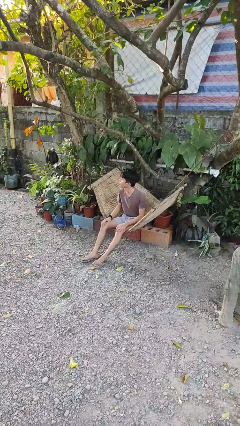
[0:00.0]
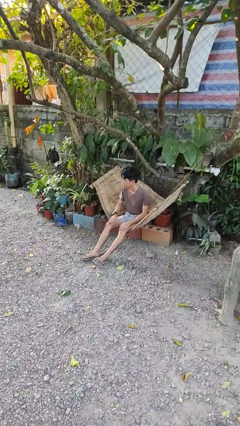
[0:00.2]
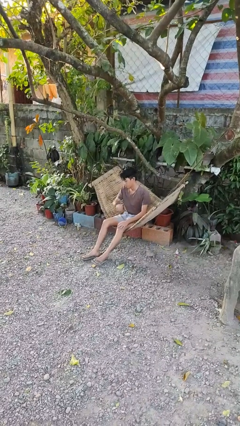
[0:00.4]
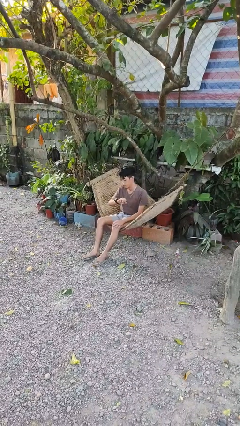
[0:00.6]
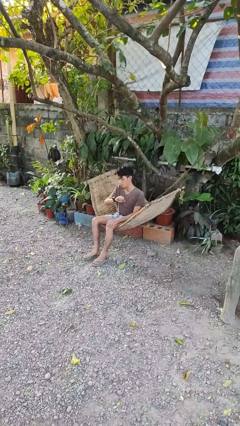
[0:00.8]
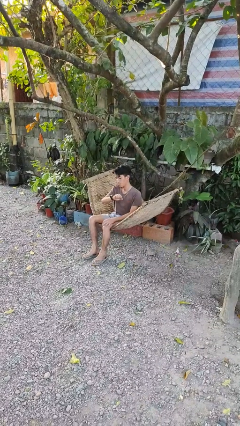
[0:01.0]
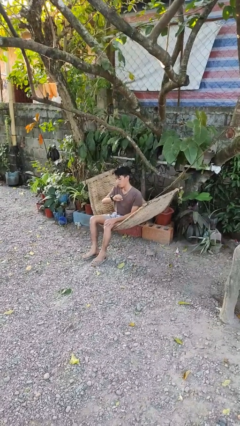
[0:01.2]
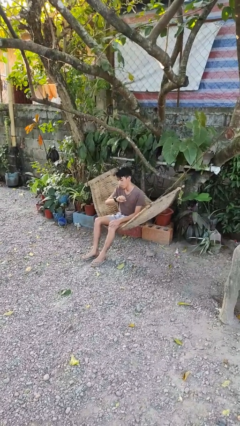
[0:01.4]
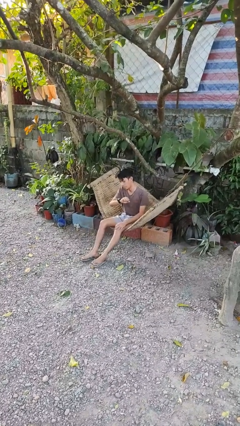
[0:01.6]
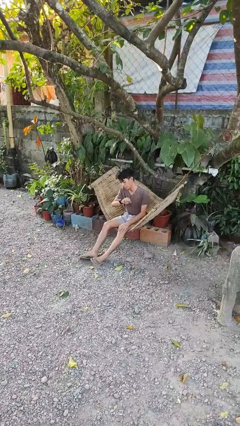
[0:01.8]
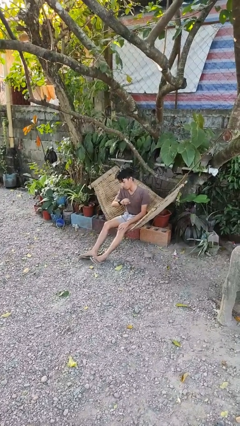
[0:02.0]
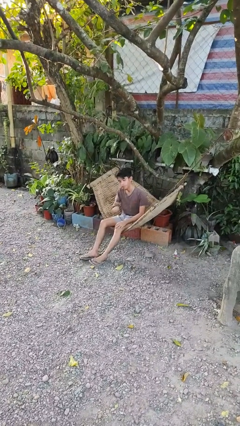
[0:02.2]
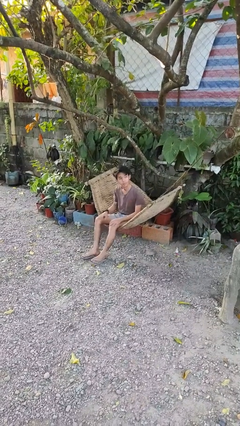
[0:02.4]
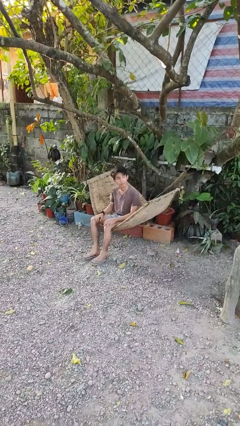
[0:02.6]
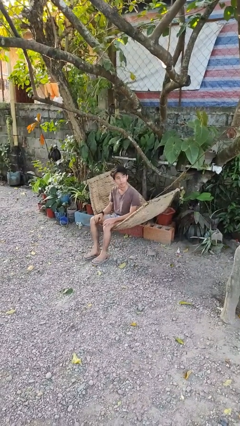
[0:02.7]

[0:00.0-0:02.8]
person looks at wristwatch

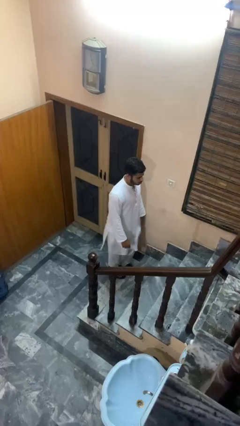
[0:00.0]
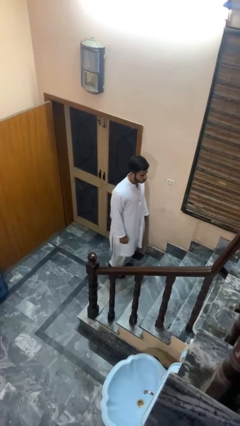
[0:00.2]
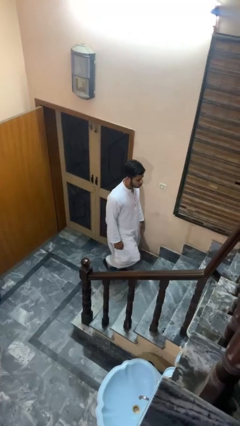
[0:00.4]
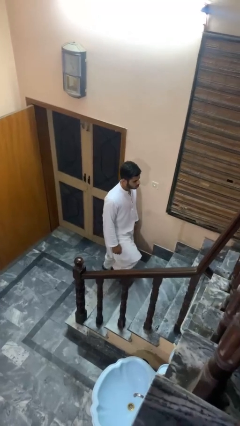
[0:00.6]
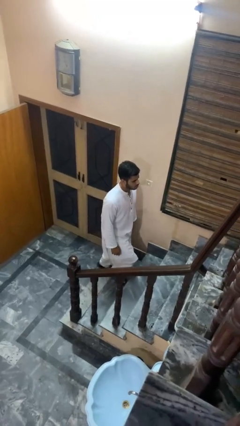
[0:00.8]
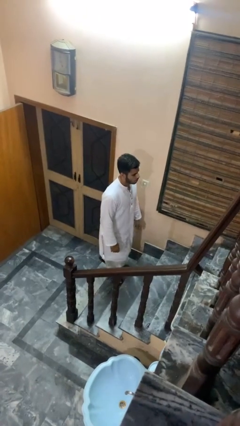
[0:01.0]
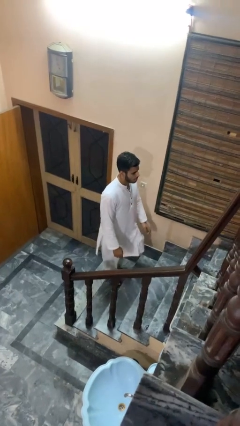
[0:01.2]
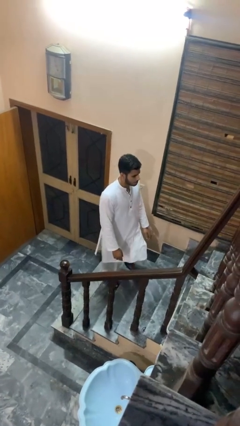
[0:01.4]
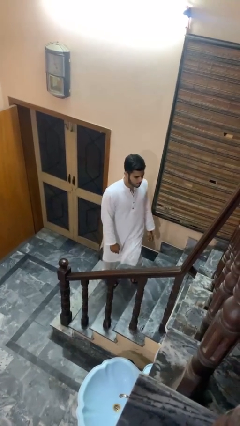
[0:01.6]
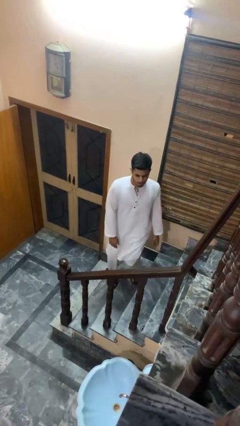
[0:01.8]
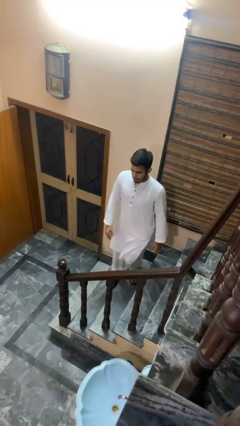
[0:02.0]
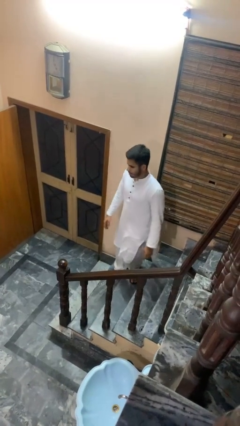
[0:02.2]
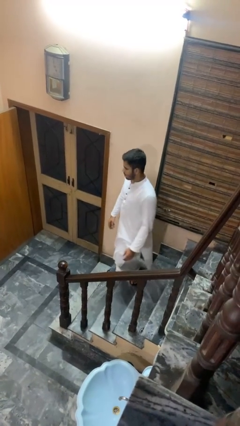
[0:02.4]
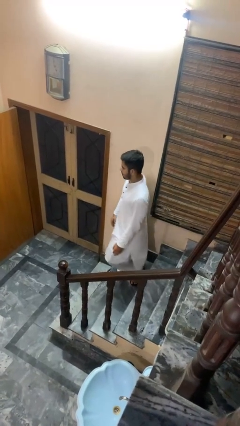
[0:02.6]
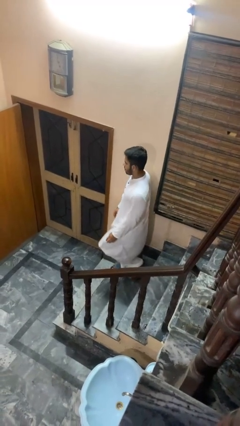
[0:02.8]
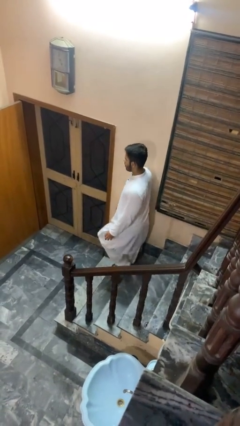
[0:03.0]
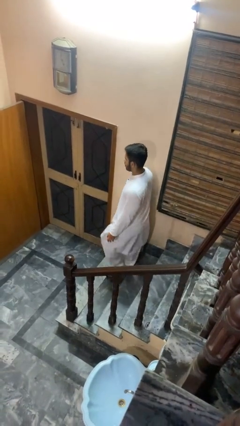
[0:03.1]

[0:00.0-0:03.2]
person climbs up stairs

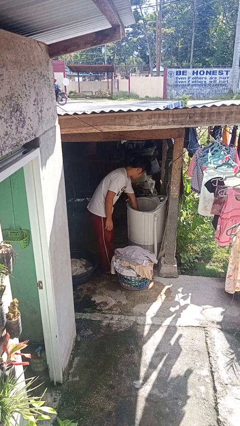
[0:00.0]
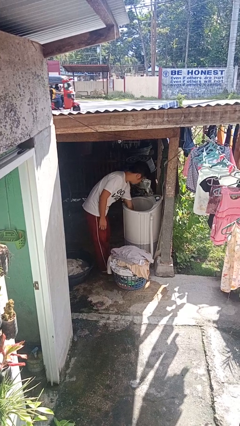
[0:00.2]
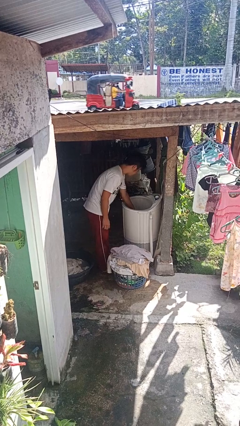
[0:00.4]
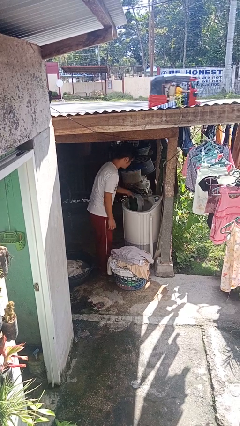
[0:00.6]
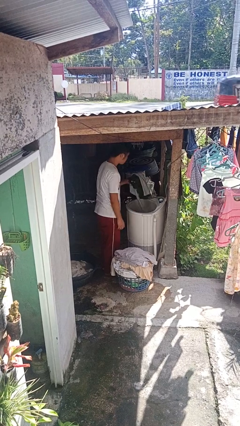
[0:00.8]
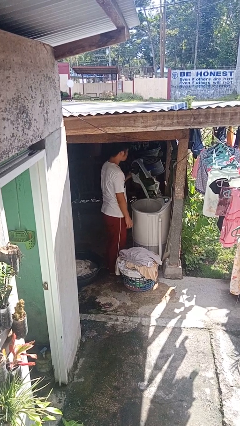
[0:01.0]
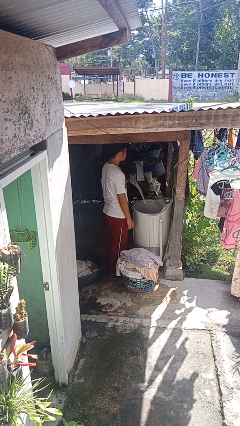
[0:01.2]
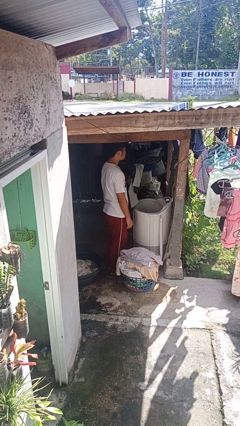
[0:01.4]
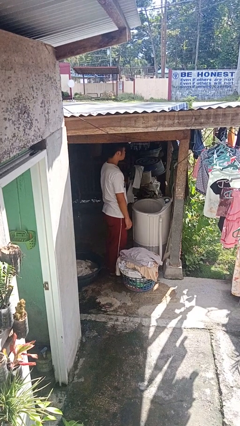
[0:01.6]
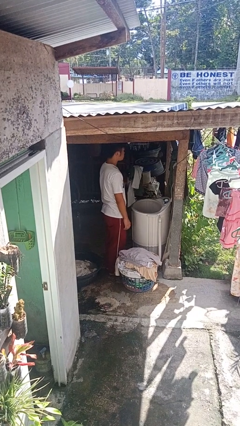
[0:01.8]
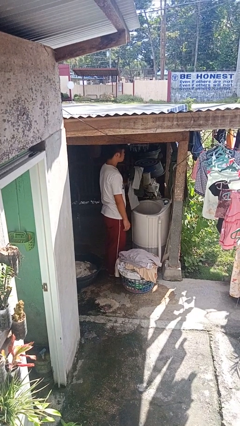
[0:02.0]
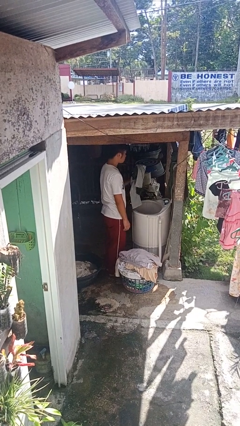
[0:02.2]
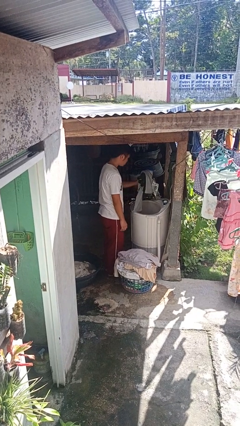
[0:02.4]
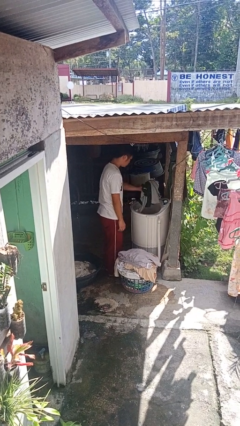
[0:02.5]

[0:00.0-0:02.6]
person unloads clotheswasher

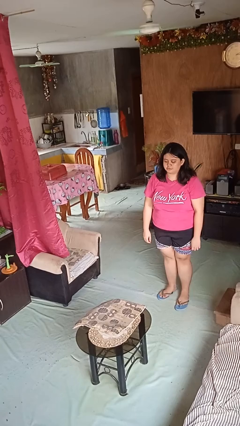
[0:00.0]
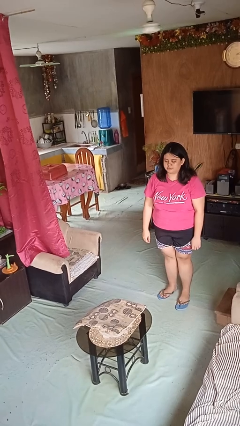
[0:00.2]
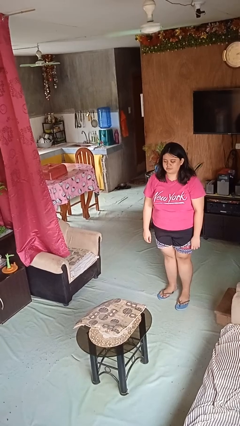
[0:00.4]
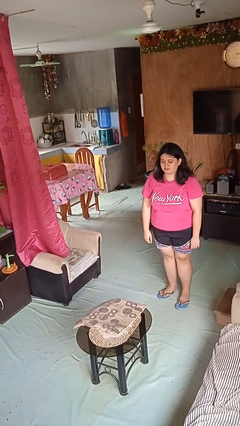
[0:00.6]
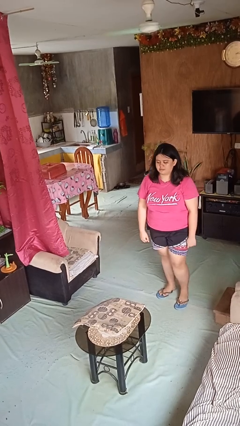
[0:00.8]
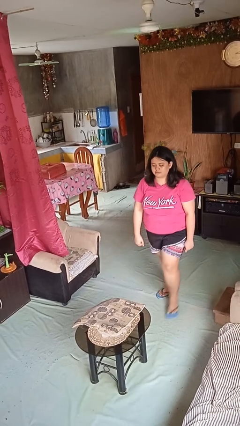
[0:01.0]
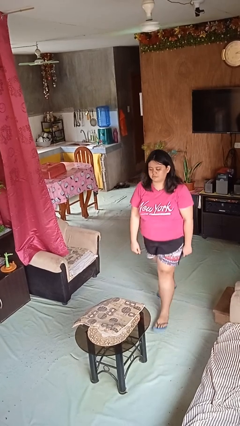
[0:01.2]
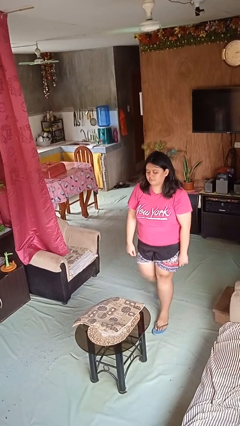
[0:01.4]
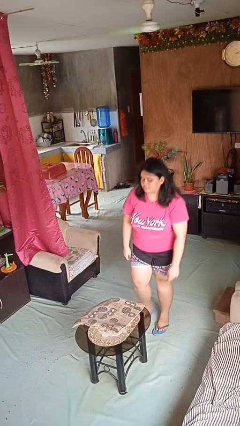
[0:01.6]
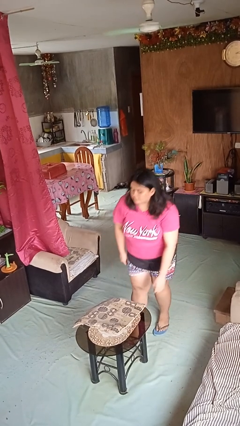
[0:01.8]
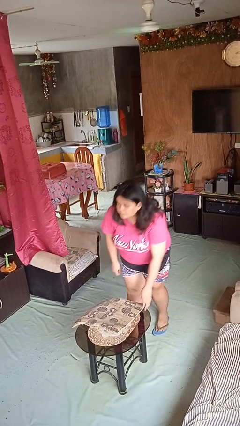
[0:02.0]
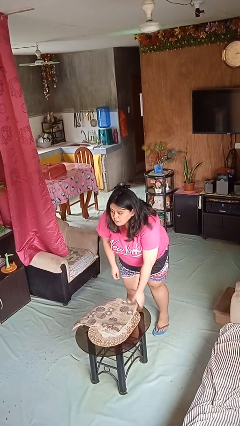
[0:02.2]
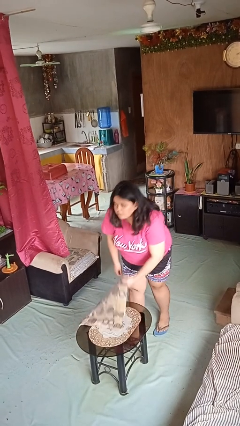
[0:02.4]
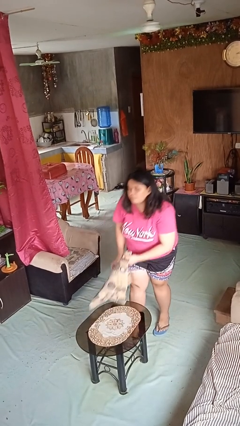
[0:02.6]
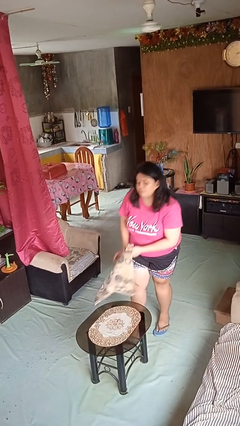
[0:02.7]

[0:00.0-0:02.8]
person picks up object from table

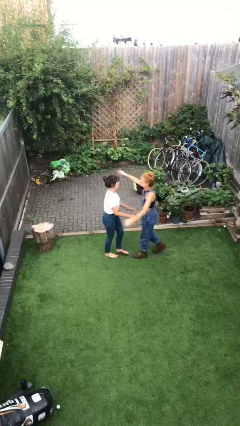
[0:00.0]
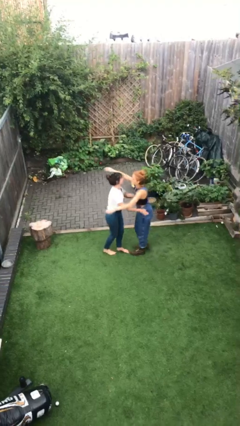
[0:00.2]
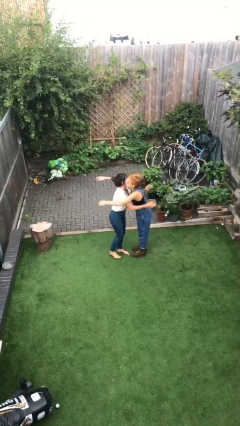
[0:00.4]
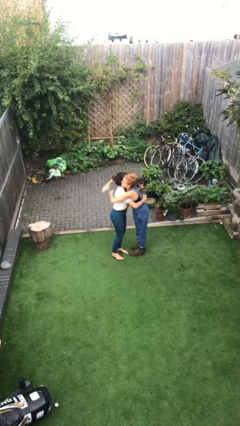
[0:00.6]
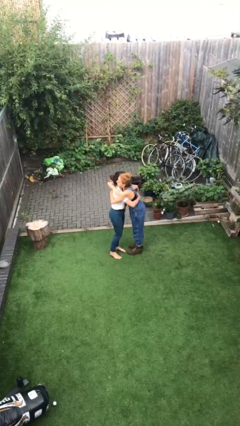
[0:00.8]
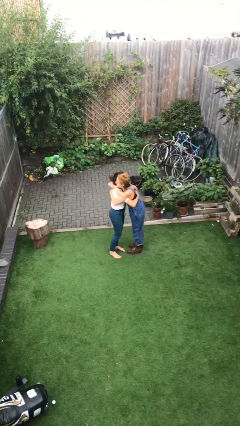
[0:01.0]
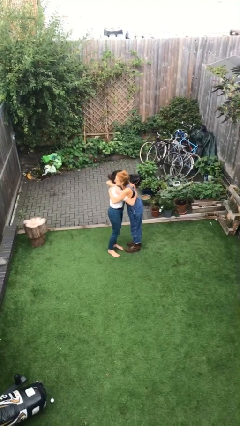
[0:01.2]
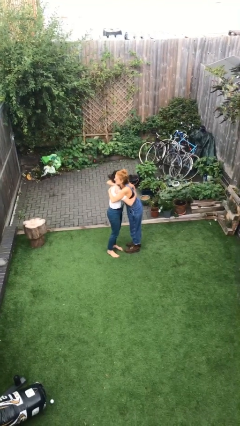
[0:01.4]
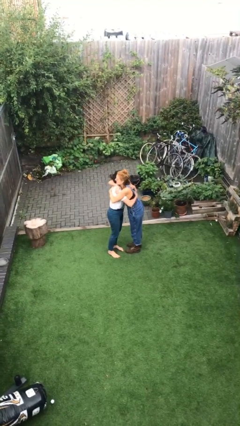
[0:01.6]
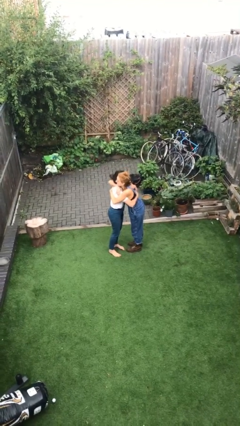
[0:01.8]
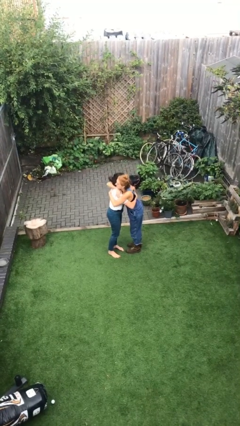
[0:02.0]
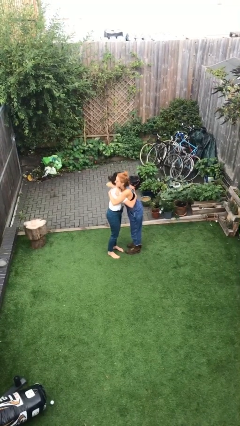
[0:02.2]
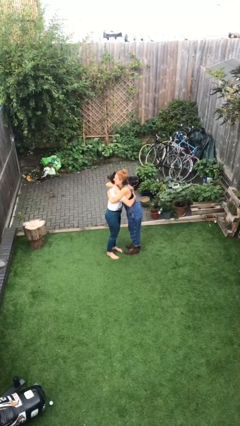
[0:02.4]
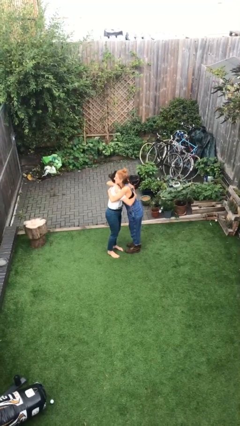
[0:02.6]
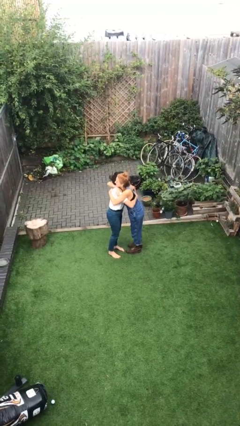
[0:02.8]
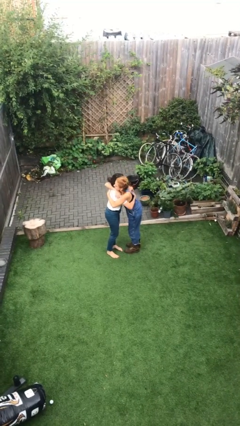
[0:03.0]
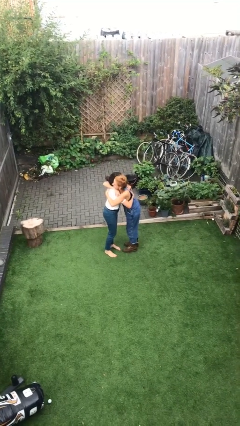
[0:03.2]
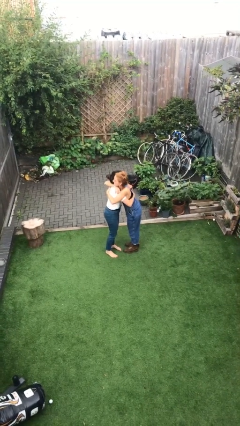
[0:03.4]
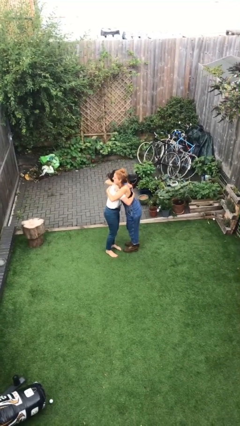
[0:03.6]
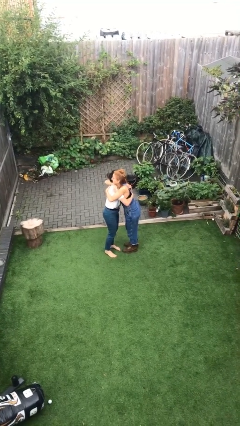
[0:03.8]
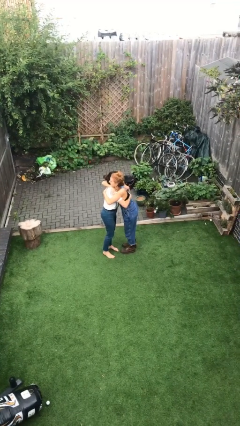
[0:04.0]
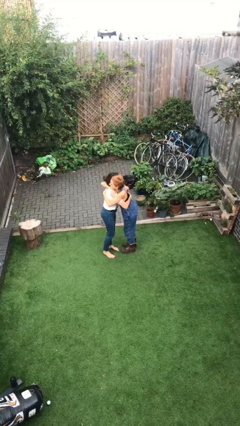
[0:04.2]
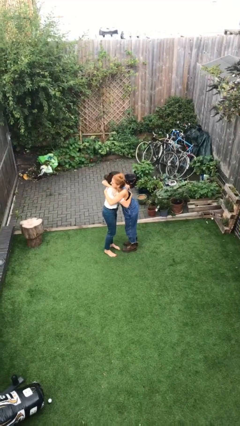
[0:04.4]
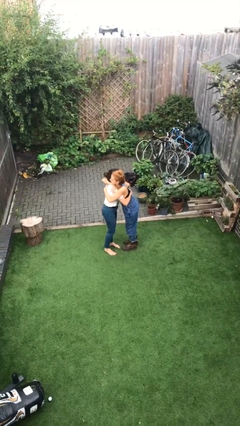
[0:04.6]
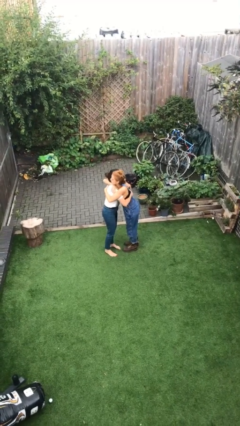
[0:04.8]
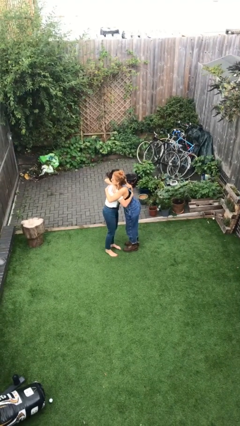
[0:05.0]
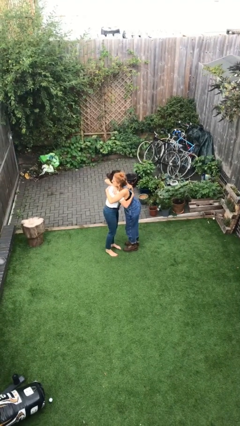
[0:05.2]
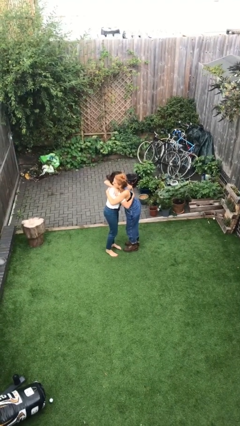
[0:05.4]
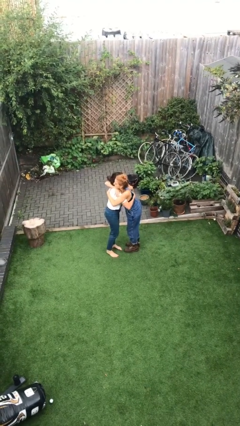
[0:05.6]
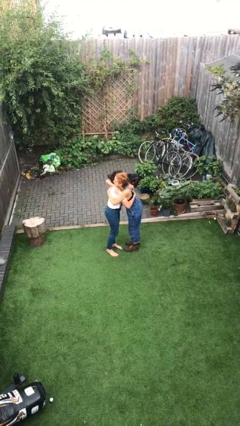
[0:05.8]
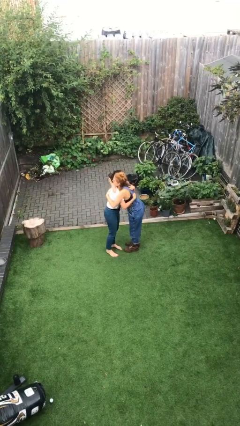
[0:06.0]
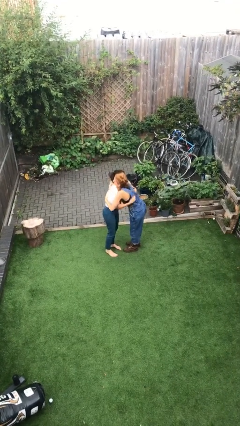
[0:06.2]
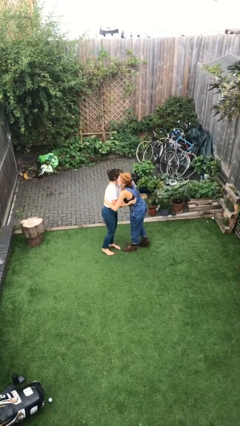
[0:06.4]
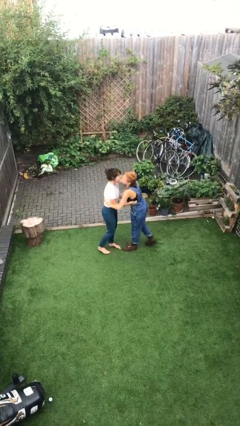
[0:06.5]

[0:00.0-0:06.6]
person embraces person
